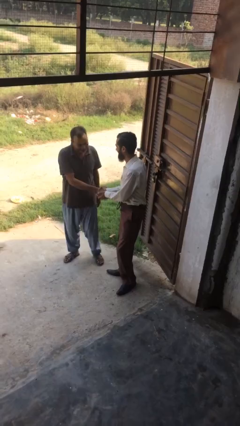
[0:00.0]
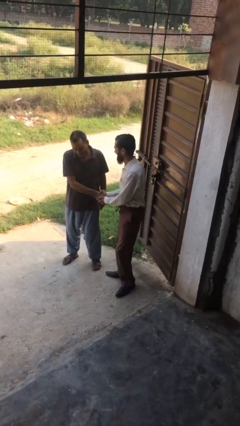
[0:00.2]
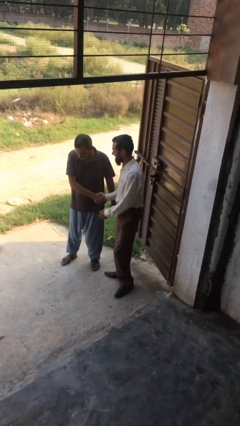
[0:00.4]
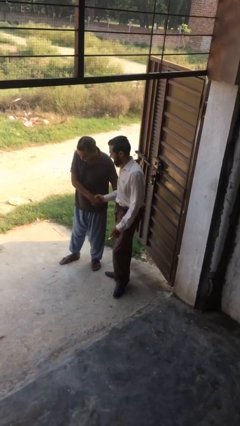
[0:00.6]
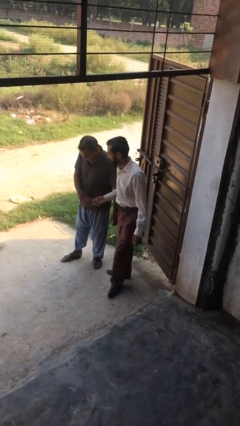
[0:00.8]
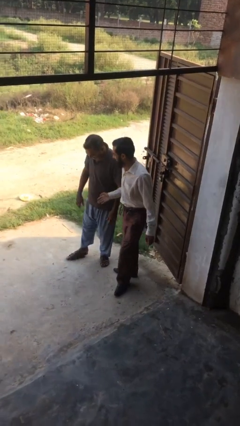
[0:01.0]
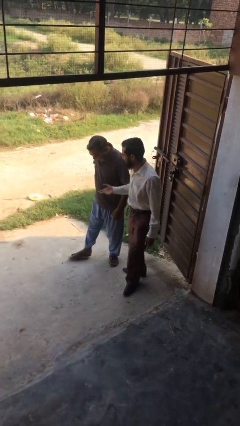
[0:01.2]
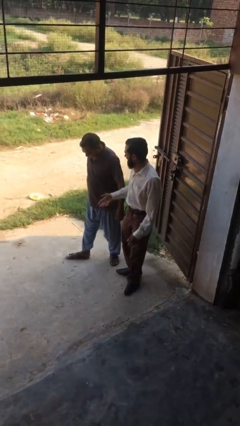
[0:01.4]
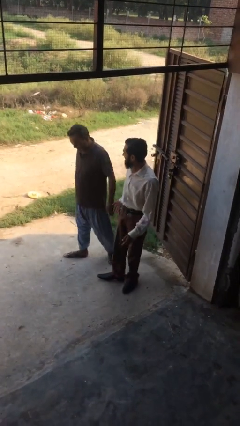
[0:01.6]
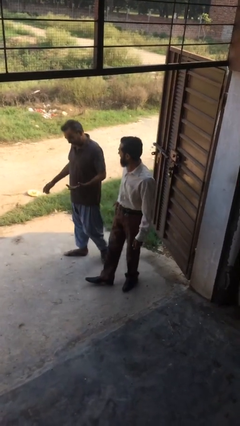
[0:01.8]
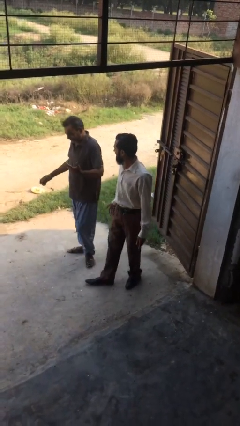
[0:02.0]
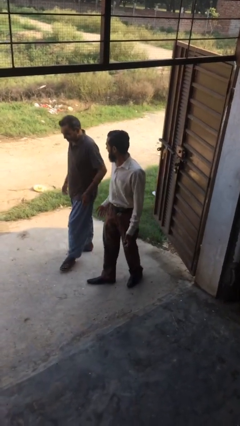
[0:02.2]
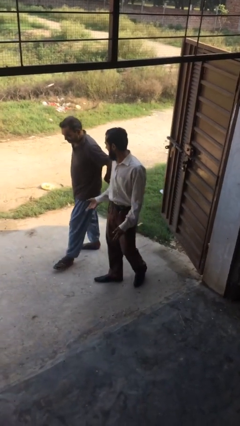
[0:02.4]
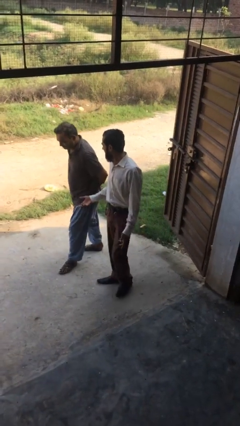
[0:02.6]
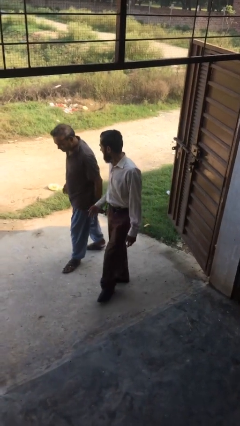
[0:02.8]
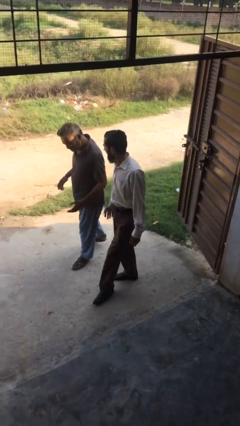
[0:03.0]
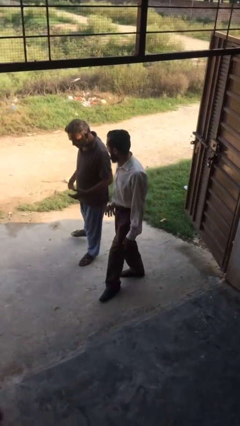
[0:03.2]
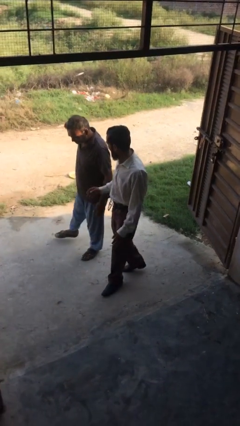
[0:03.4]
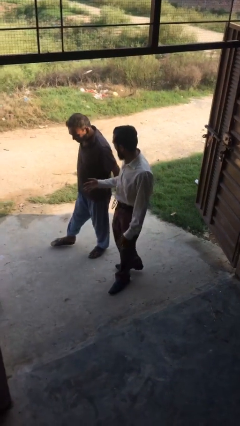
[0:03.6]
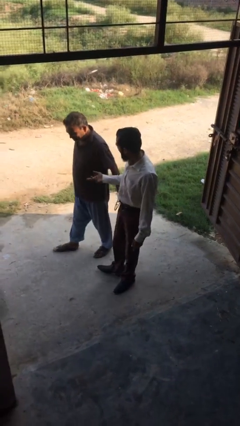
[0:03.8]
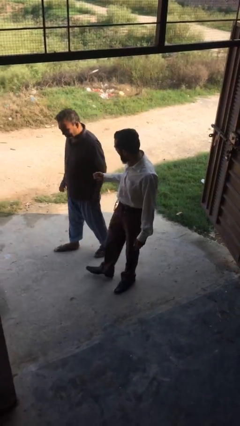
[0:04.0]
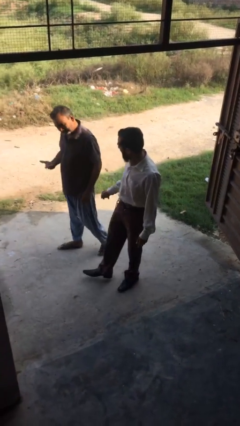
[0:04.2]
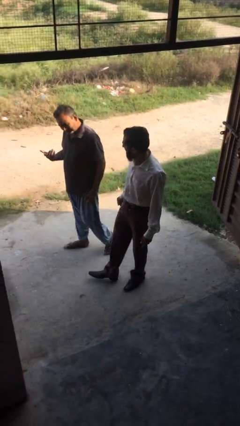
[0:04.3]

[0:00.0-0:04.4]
person talks to person

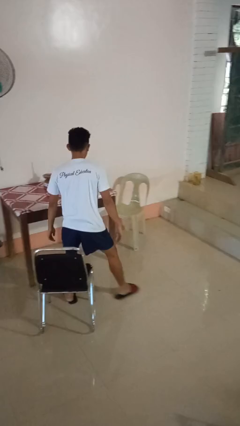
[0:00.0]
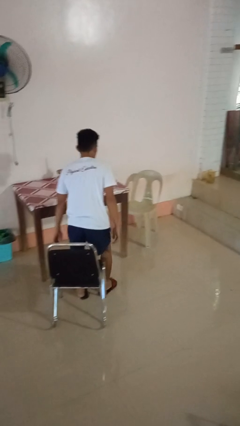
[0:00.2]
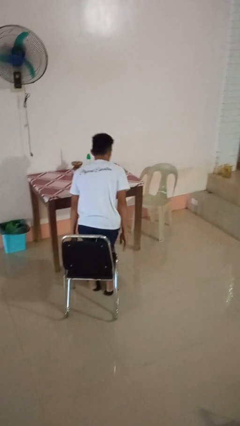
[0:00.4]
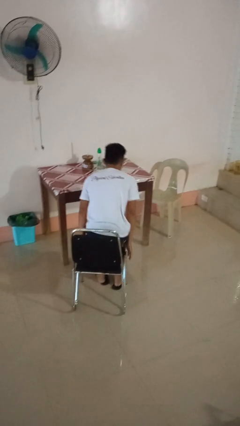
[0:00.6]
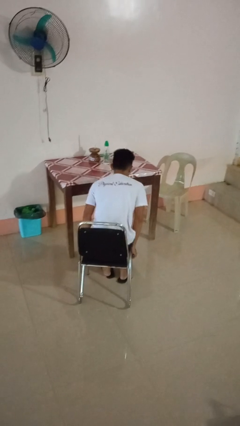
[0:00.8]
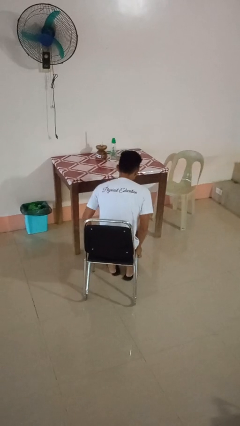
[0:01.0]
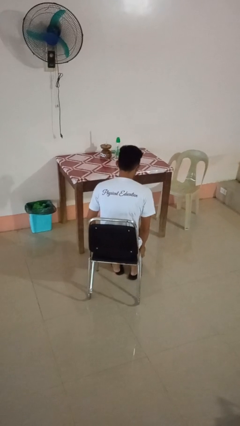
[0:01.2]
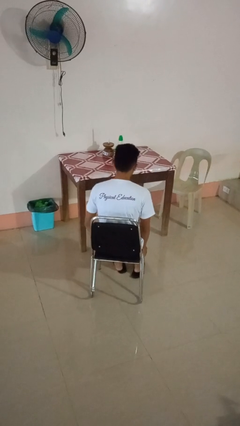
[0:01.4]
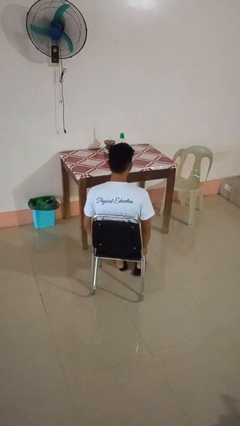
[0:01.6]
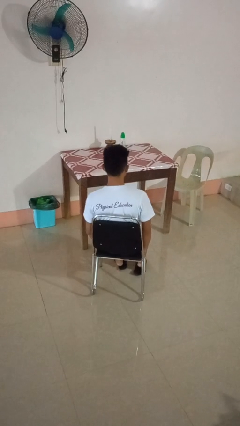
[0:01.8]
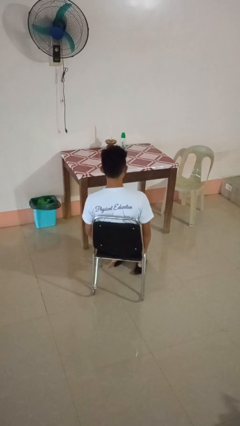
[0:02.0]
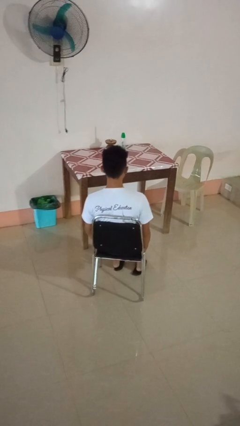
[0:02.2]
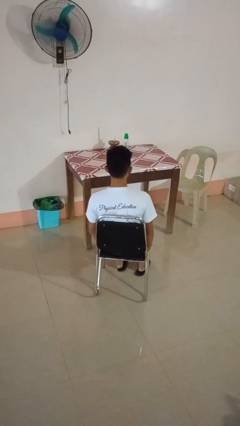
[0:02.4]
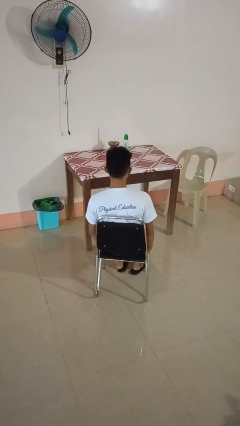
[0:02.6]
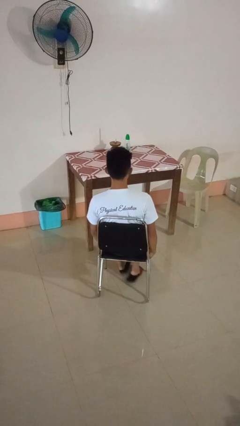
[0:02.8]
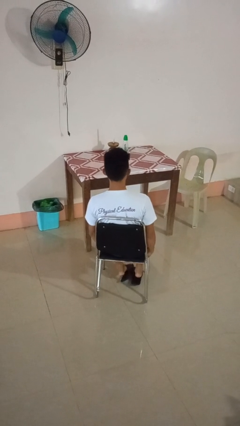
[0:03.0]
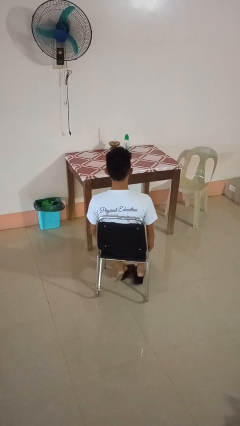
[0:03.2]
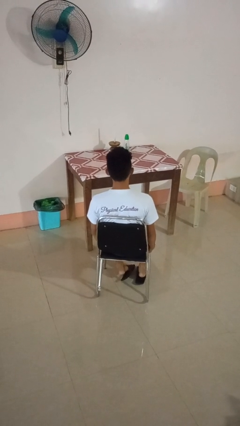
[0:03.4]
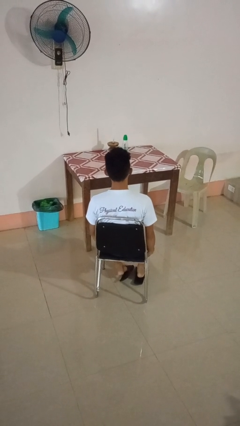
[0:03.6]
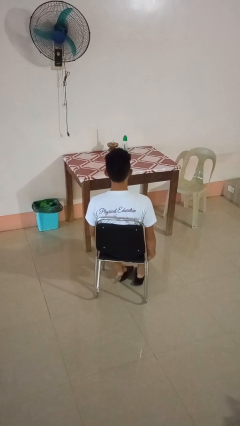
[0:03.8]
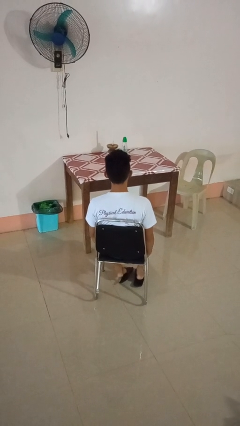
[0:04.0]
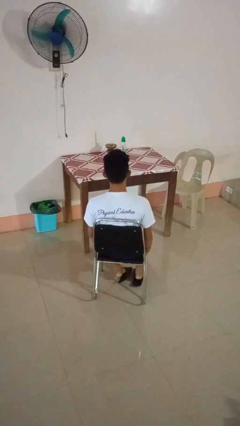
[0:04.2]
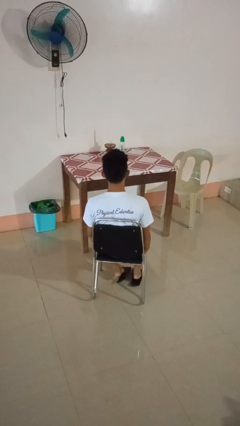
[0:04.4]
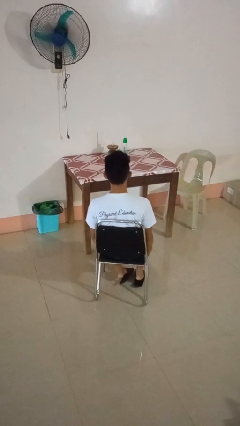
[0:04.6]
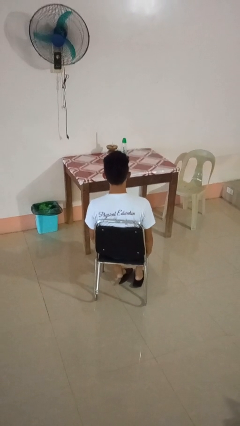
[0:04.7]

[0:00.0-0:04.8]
person sits down

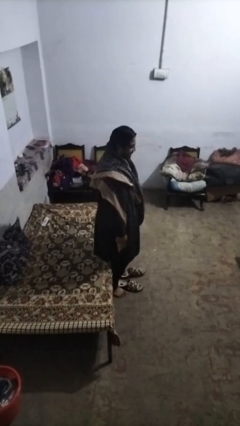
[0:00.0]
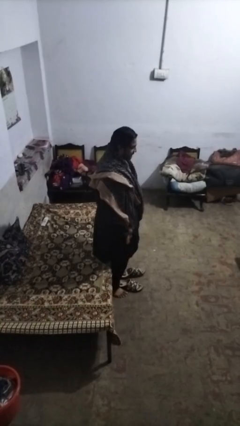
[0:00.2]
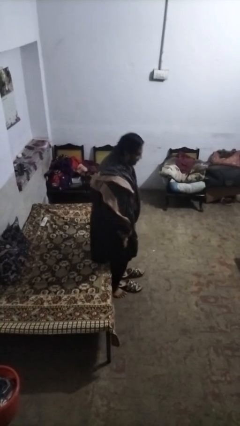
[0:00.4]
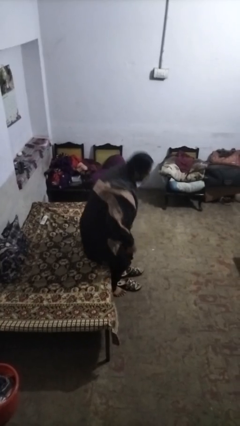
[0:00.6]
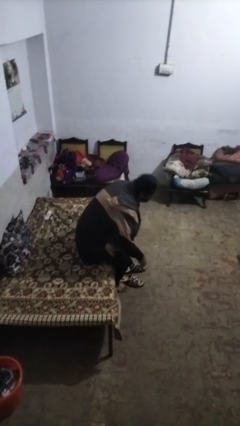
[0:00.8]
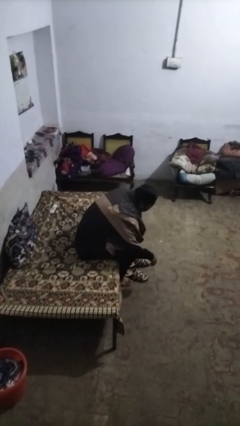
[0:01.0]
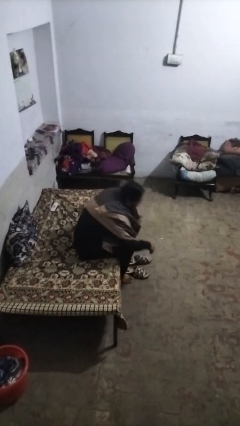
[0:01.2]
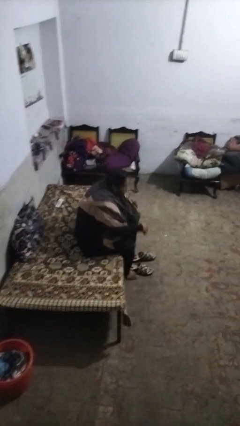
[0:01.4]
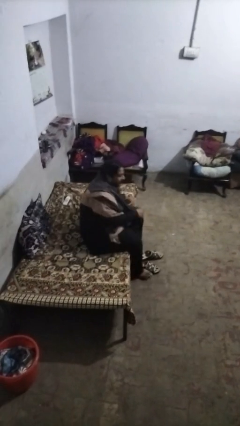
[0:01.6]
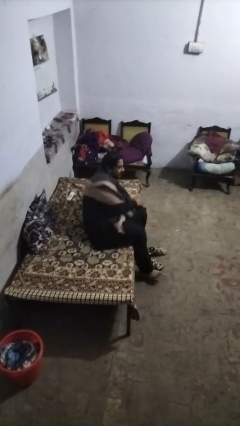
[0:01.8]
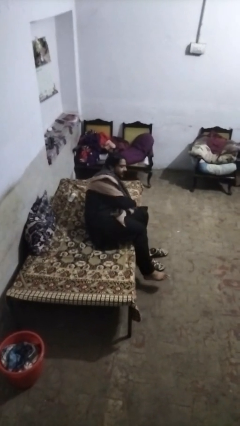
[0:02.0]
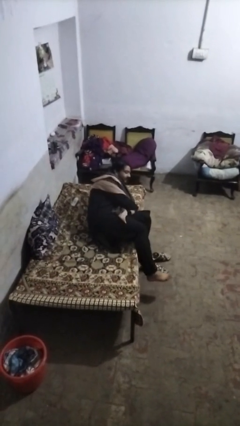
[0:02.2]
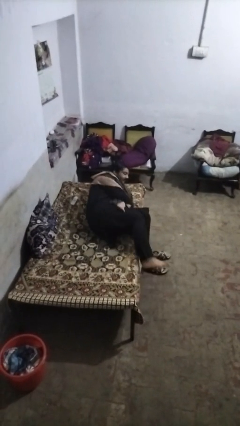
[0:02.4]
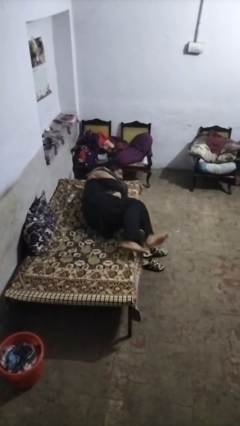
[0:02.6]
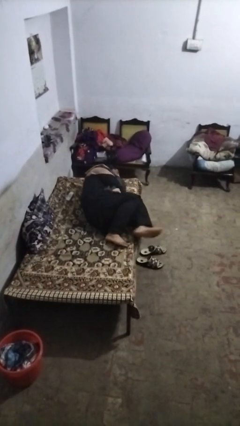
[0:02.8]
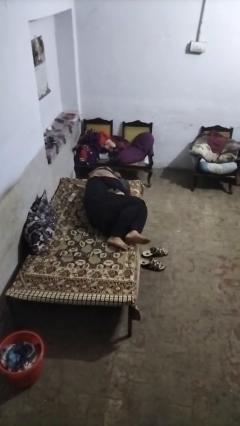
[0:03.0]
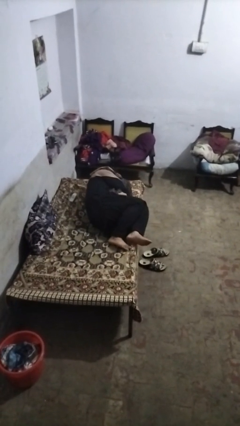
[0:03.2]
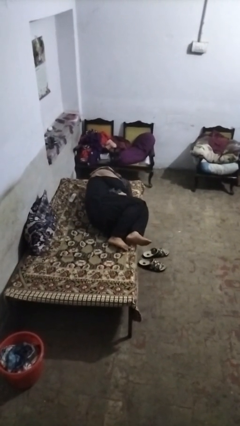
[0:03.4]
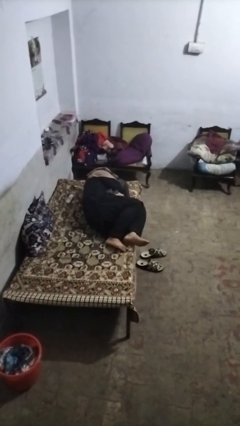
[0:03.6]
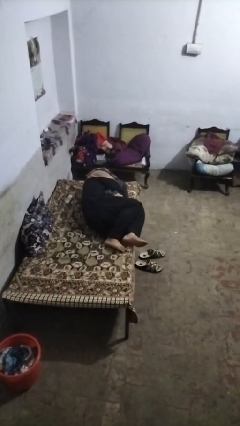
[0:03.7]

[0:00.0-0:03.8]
person lies down on bed

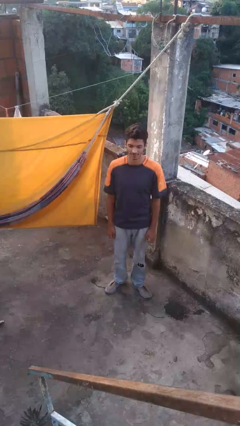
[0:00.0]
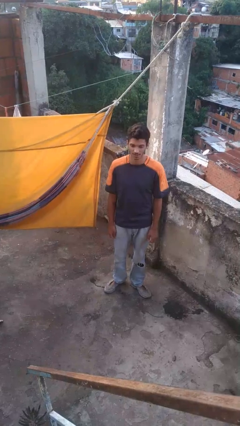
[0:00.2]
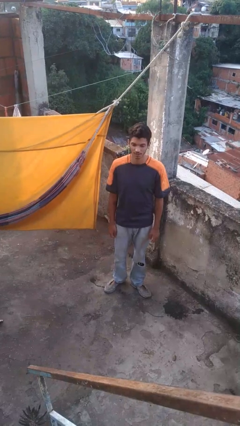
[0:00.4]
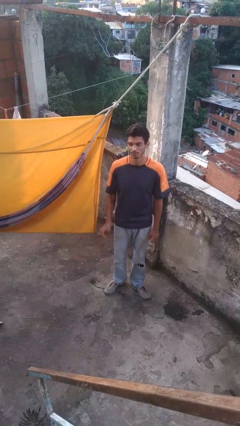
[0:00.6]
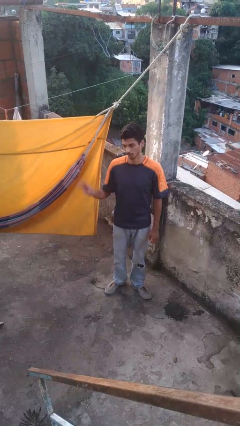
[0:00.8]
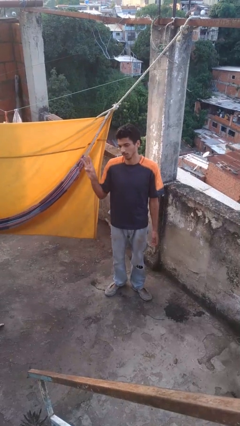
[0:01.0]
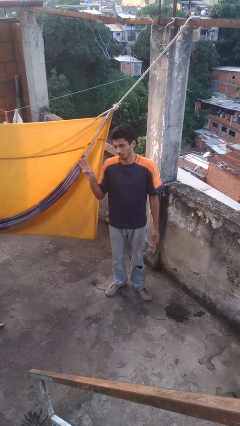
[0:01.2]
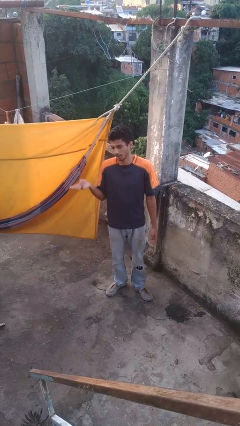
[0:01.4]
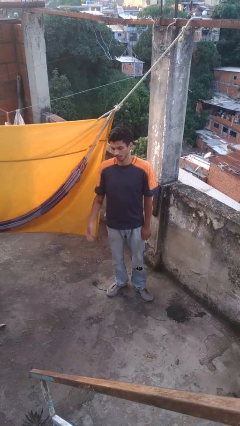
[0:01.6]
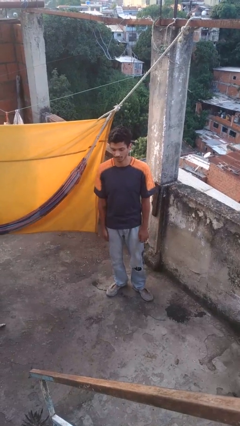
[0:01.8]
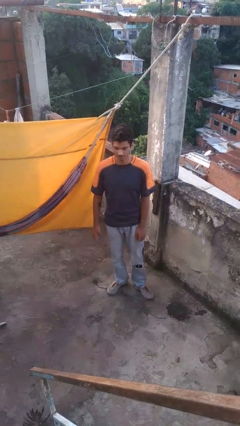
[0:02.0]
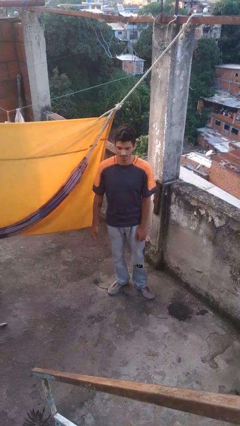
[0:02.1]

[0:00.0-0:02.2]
person gestures number three

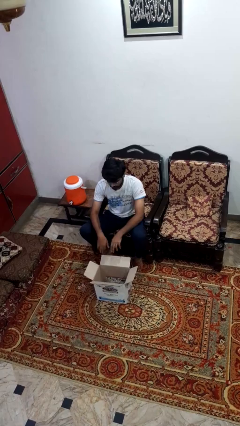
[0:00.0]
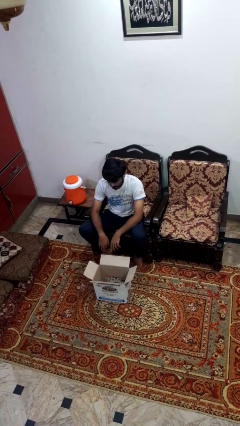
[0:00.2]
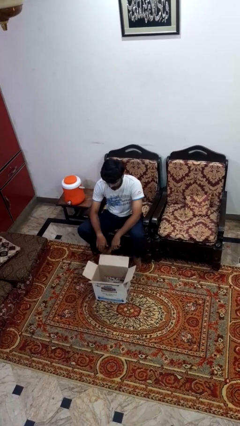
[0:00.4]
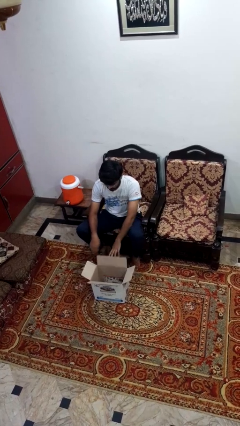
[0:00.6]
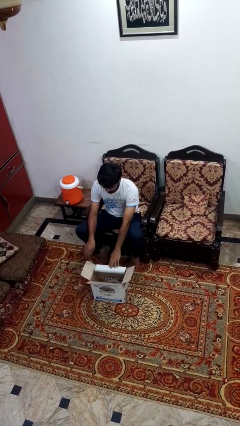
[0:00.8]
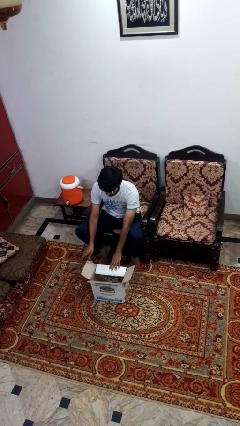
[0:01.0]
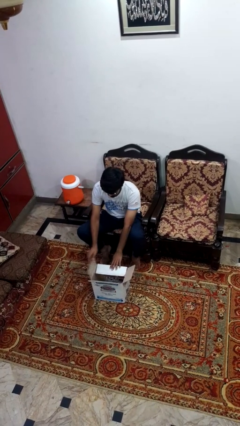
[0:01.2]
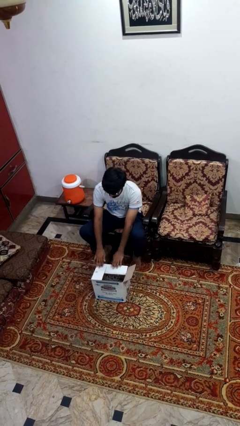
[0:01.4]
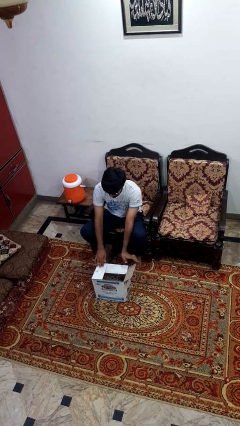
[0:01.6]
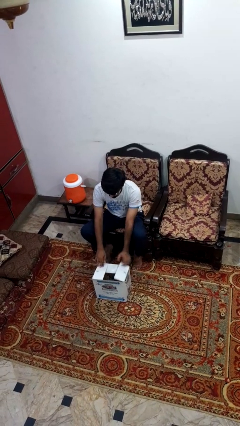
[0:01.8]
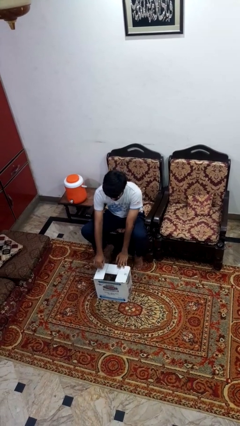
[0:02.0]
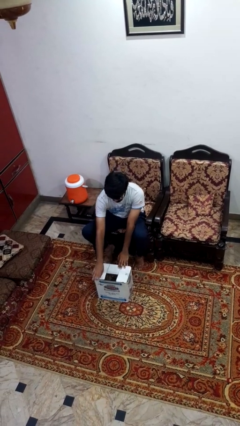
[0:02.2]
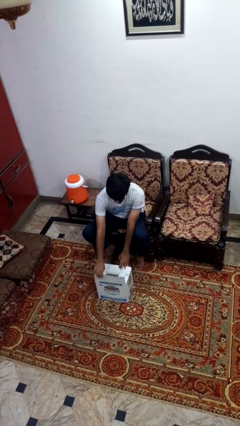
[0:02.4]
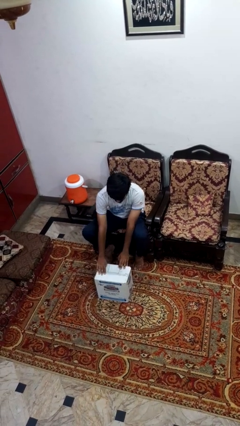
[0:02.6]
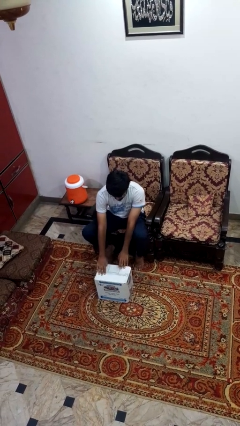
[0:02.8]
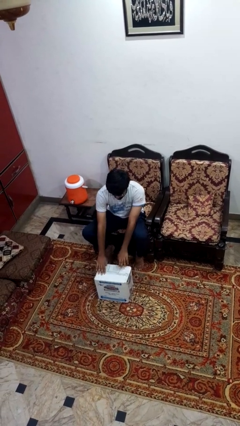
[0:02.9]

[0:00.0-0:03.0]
person closes box
